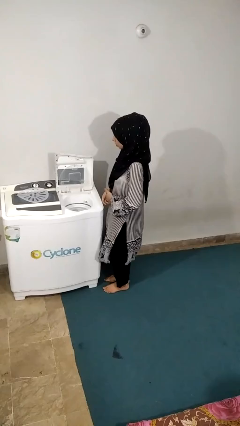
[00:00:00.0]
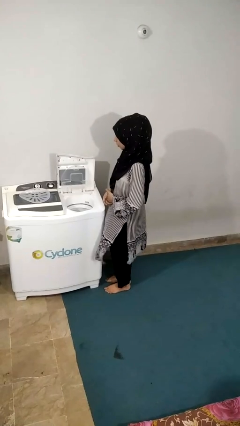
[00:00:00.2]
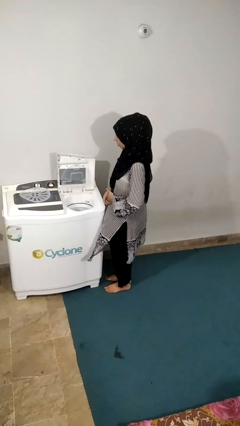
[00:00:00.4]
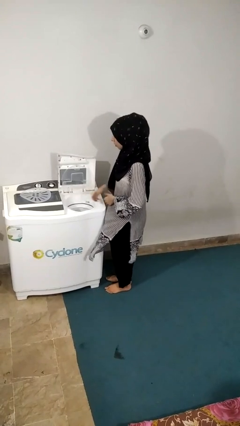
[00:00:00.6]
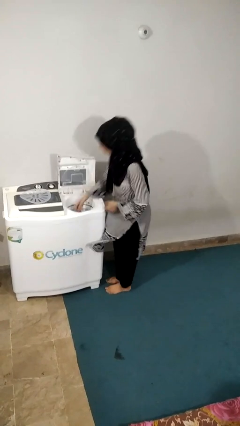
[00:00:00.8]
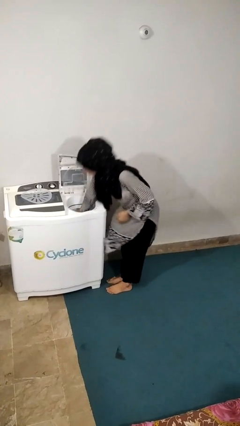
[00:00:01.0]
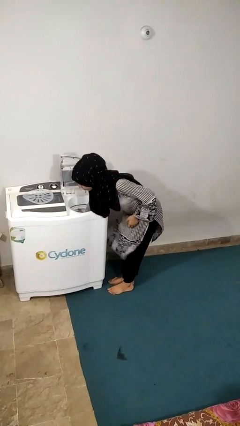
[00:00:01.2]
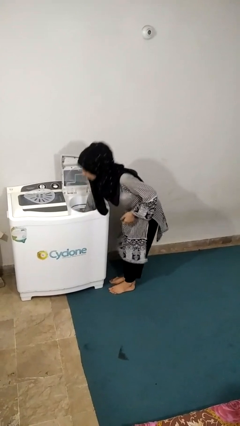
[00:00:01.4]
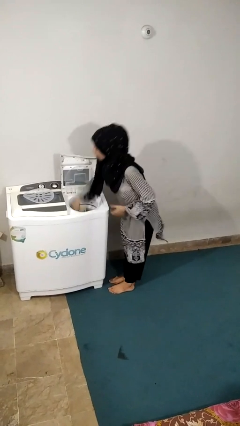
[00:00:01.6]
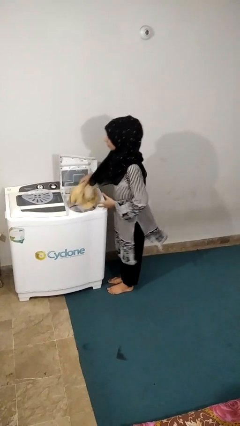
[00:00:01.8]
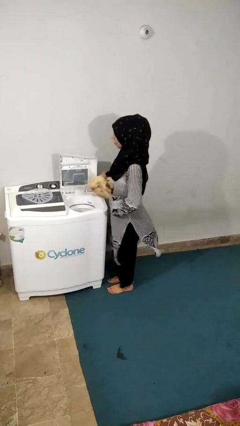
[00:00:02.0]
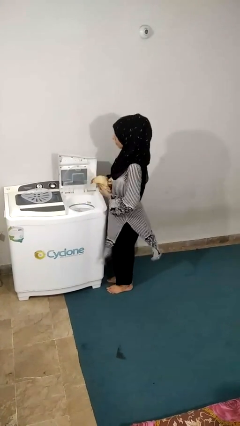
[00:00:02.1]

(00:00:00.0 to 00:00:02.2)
person unloads dryer

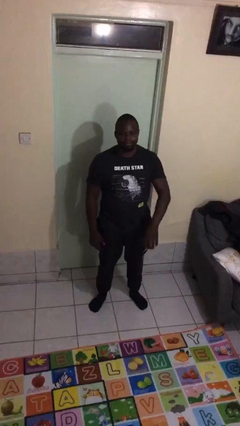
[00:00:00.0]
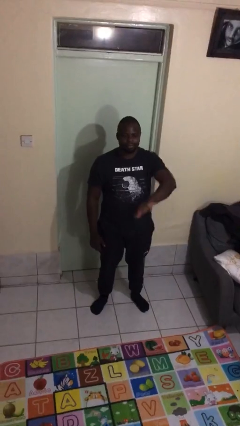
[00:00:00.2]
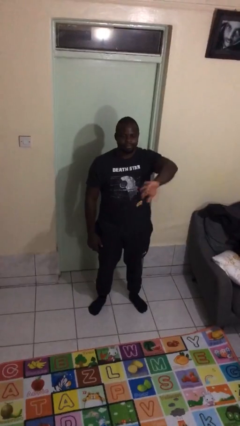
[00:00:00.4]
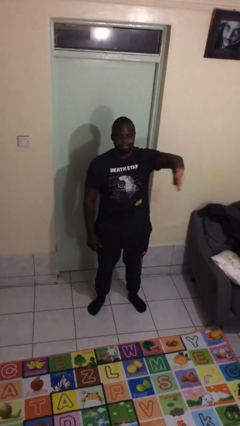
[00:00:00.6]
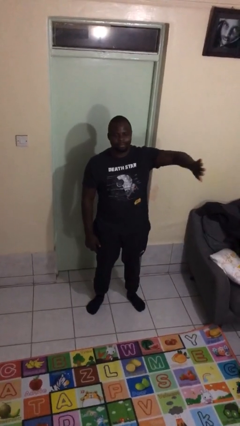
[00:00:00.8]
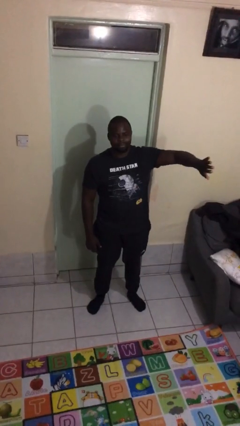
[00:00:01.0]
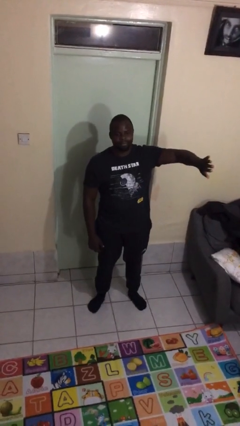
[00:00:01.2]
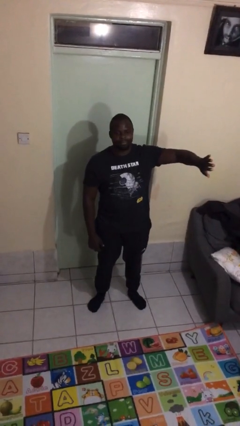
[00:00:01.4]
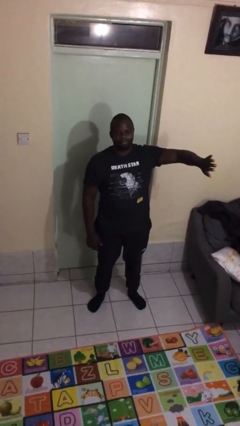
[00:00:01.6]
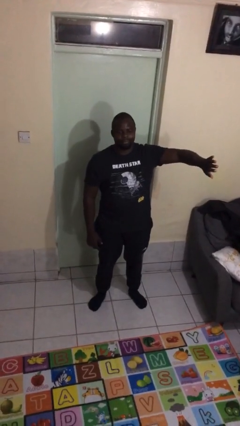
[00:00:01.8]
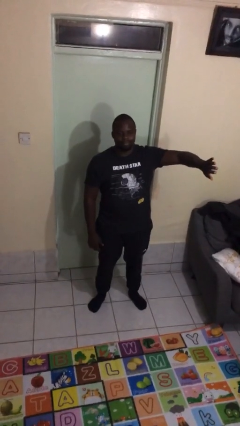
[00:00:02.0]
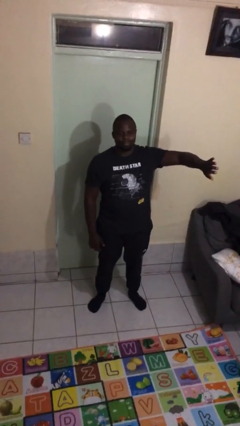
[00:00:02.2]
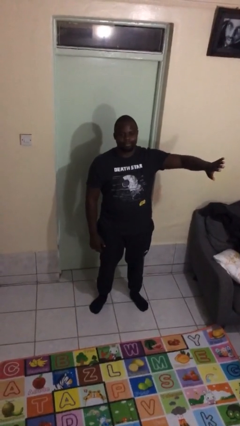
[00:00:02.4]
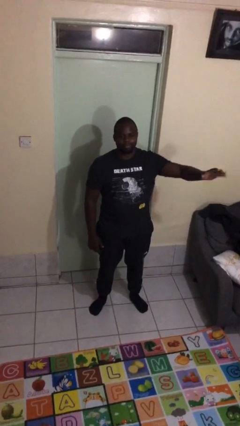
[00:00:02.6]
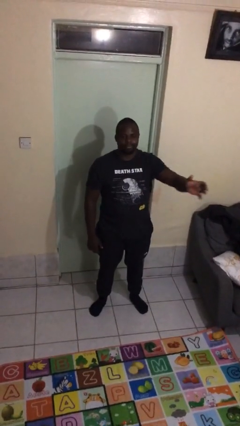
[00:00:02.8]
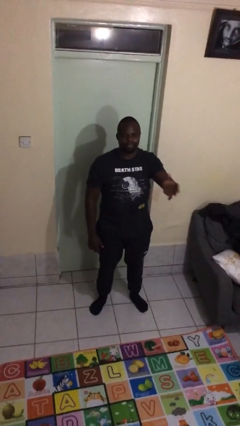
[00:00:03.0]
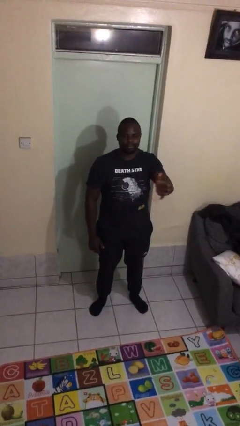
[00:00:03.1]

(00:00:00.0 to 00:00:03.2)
person gestures swipe left

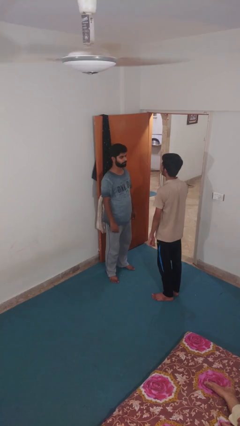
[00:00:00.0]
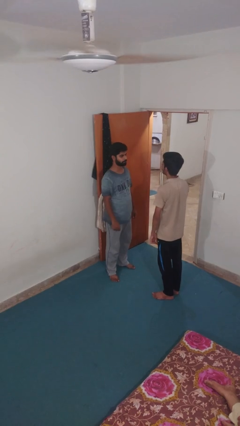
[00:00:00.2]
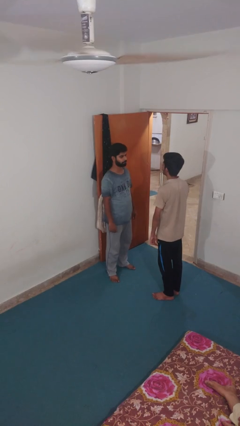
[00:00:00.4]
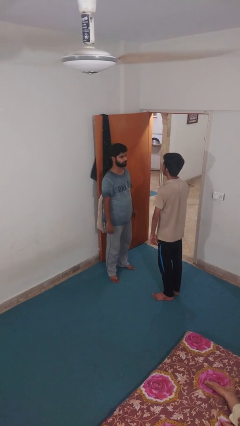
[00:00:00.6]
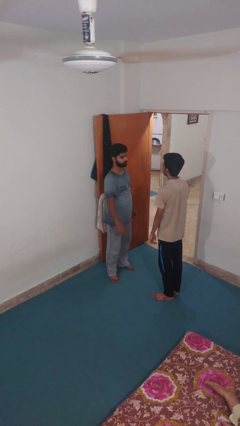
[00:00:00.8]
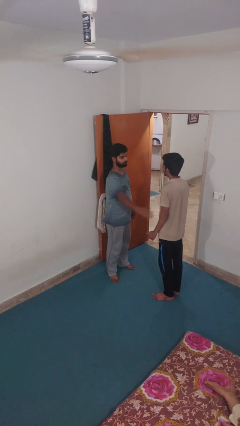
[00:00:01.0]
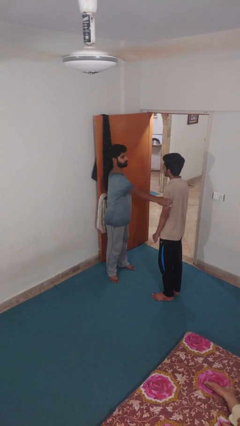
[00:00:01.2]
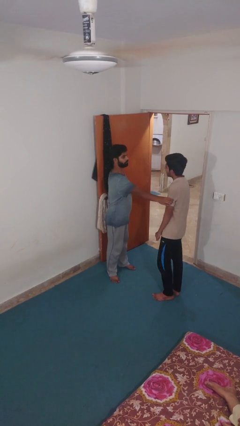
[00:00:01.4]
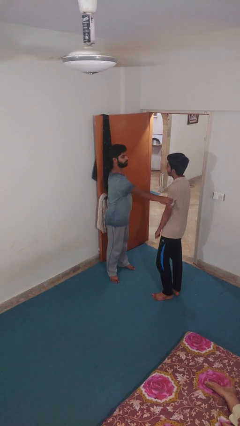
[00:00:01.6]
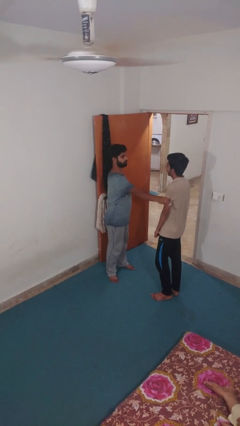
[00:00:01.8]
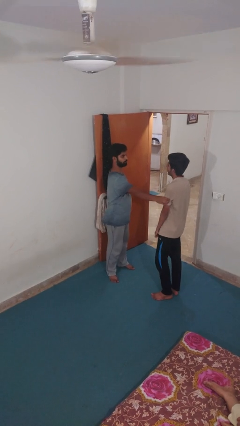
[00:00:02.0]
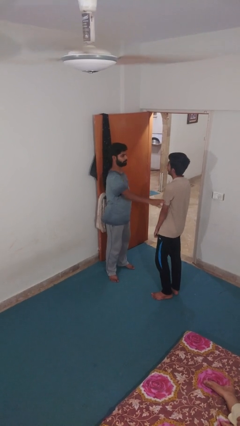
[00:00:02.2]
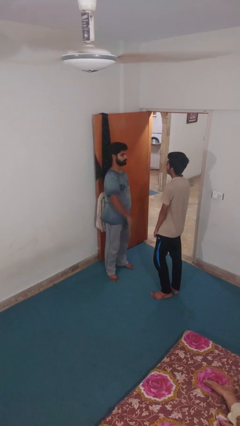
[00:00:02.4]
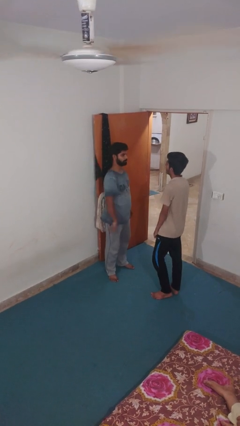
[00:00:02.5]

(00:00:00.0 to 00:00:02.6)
person grabs person by bicep

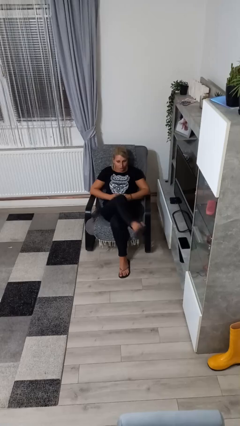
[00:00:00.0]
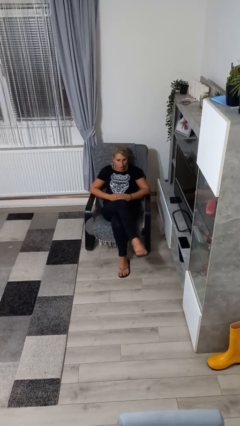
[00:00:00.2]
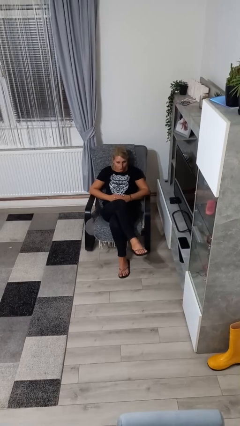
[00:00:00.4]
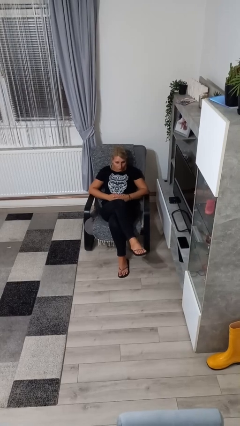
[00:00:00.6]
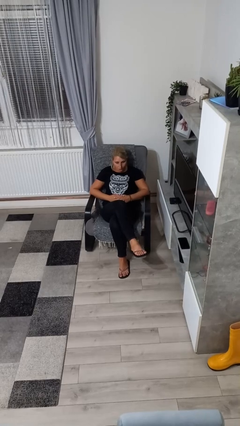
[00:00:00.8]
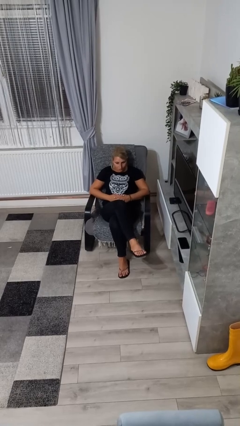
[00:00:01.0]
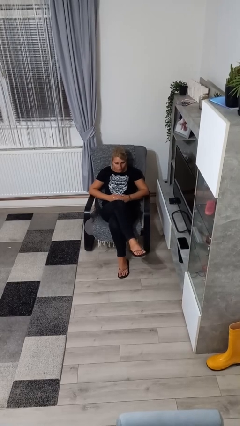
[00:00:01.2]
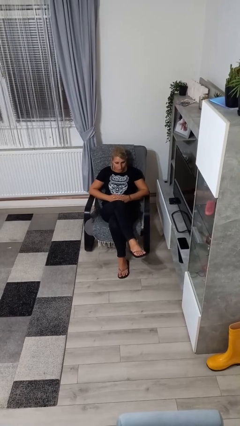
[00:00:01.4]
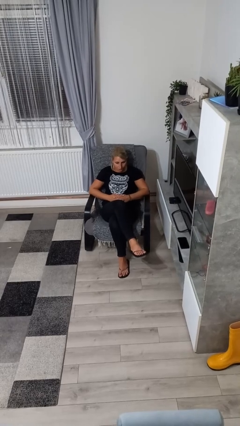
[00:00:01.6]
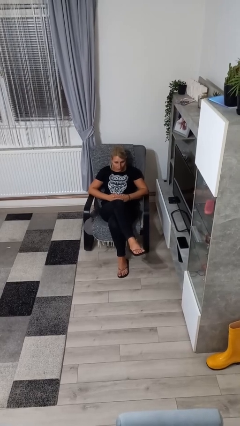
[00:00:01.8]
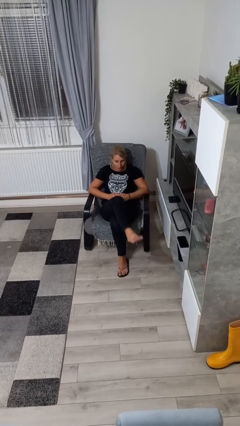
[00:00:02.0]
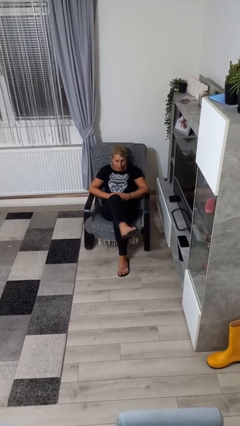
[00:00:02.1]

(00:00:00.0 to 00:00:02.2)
person crosses legs

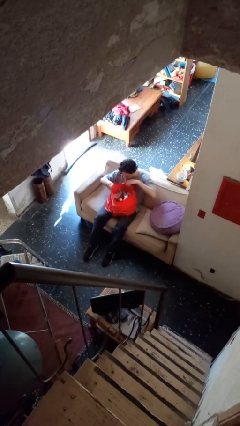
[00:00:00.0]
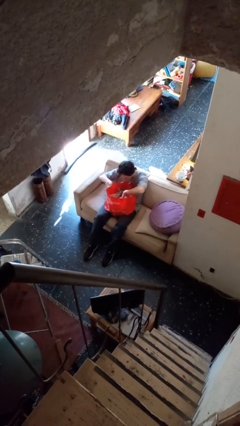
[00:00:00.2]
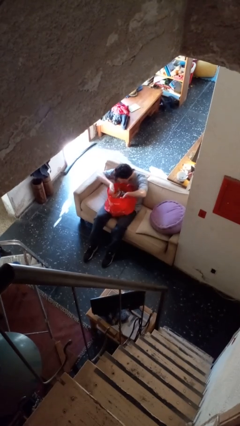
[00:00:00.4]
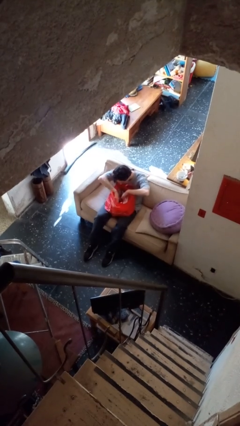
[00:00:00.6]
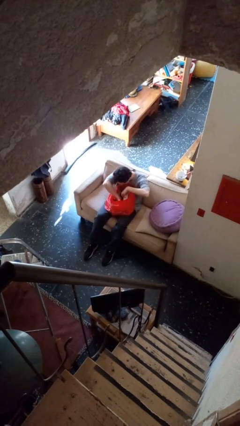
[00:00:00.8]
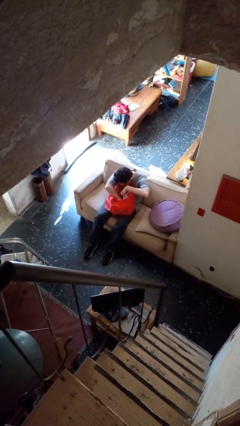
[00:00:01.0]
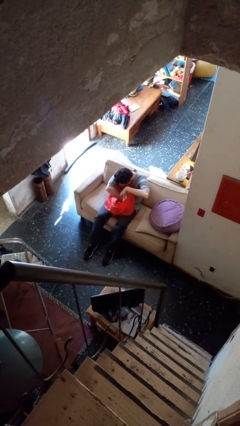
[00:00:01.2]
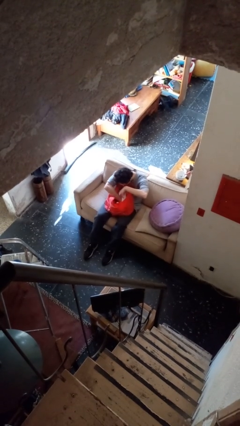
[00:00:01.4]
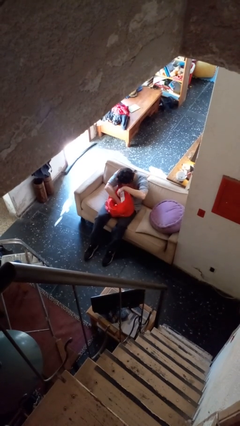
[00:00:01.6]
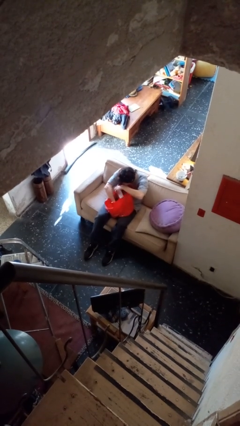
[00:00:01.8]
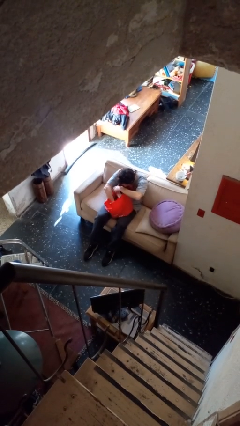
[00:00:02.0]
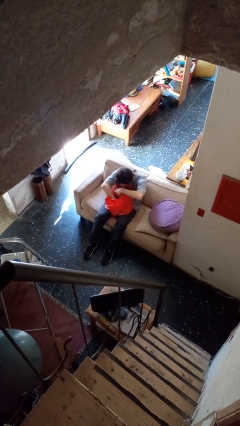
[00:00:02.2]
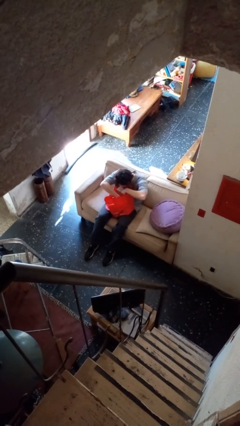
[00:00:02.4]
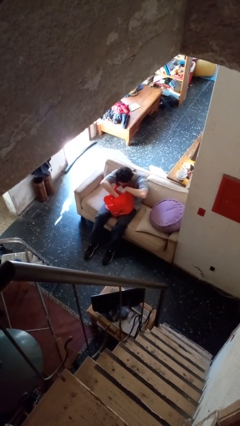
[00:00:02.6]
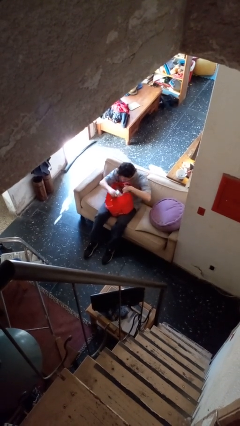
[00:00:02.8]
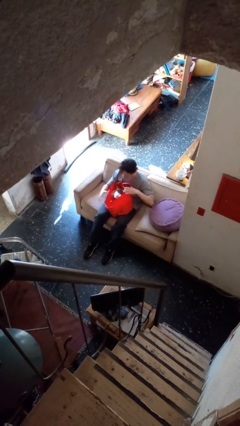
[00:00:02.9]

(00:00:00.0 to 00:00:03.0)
person searches in bag

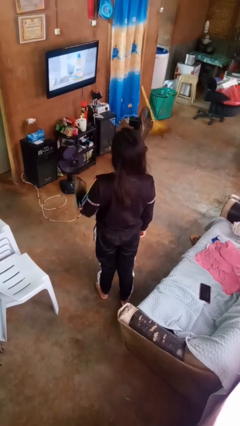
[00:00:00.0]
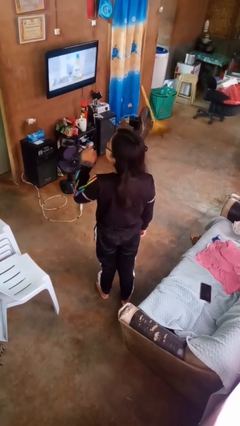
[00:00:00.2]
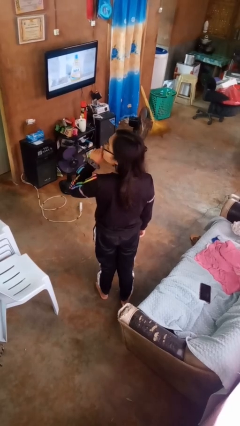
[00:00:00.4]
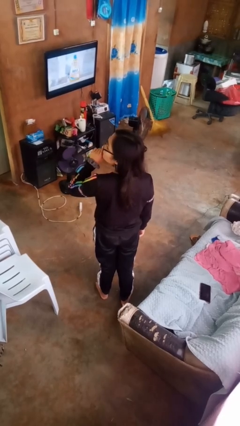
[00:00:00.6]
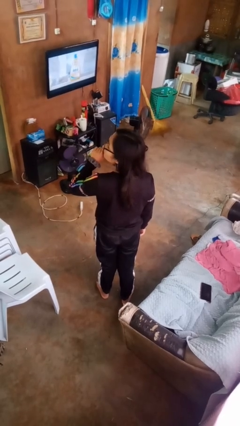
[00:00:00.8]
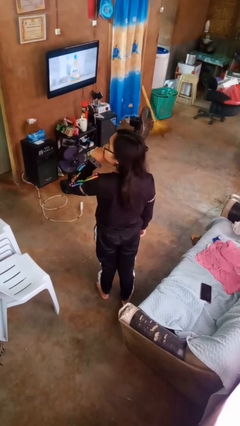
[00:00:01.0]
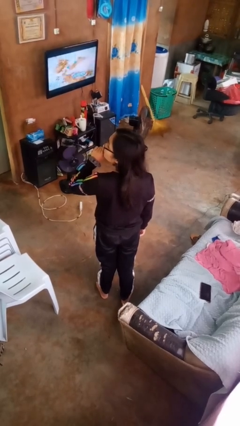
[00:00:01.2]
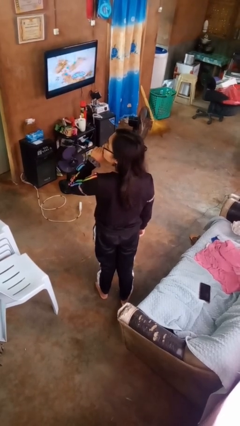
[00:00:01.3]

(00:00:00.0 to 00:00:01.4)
person gestures be quiet

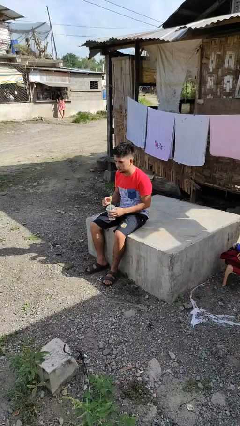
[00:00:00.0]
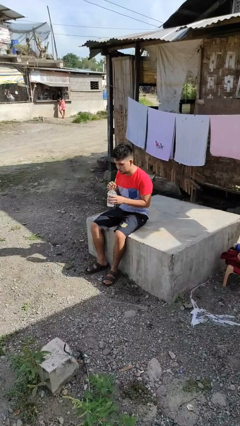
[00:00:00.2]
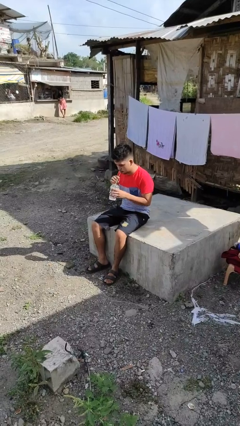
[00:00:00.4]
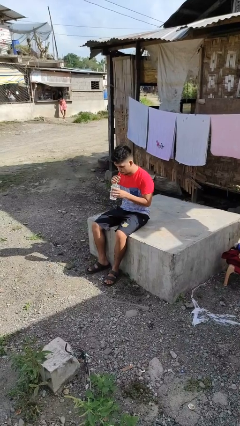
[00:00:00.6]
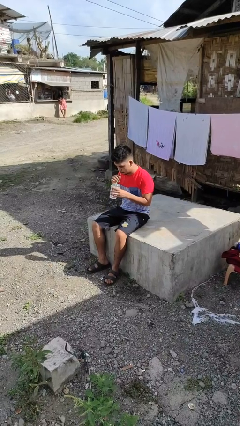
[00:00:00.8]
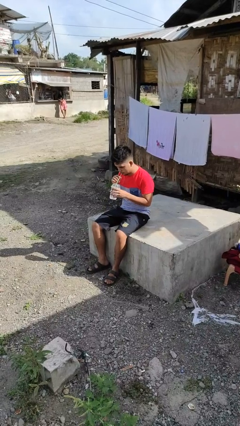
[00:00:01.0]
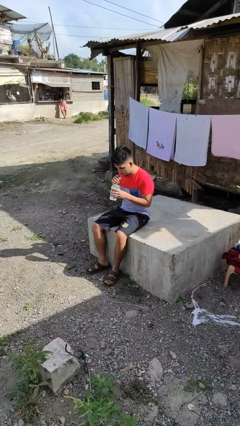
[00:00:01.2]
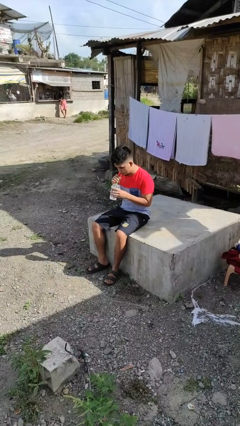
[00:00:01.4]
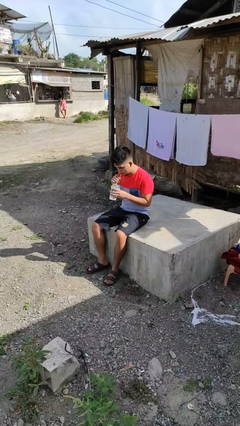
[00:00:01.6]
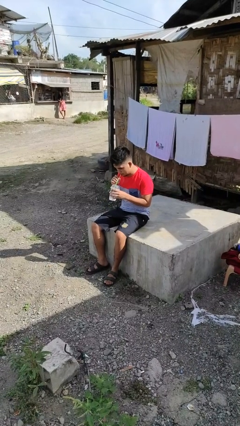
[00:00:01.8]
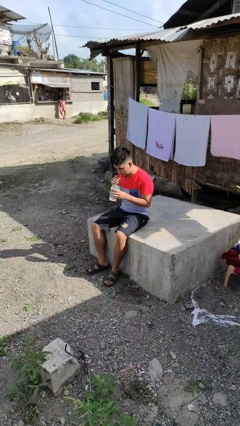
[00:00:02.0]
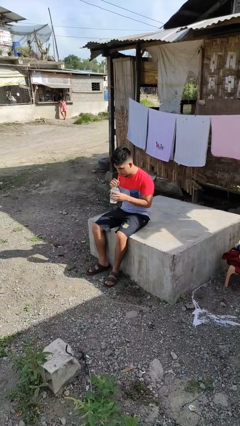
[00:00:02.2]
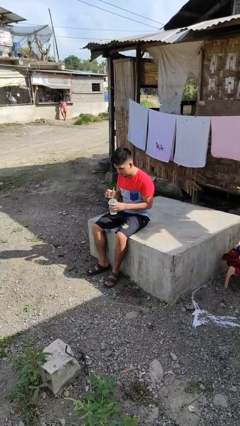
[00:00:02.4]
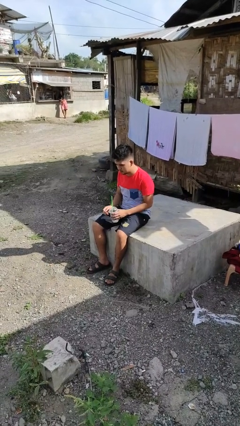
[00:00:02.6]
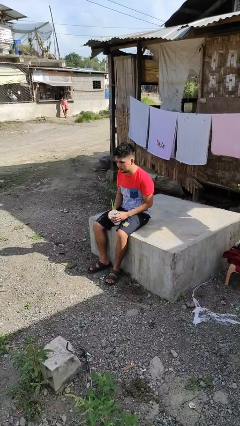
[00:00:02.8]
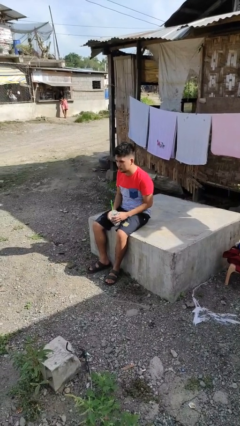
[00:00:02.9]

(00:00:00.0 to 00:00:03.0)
person drinks from straw
